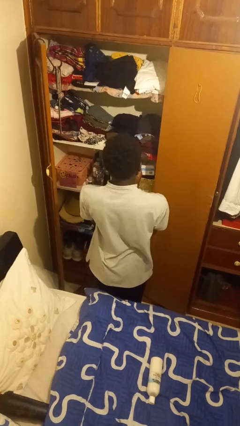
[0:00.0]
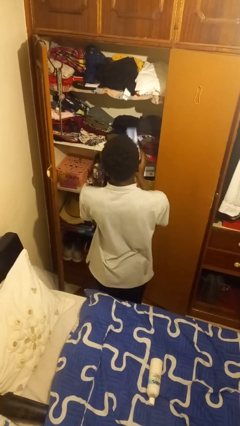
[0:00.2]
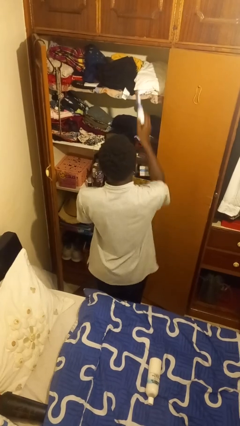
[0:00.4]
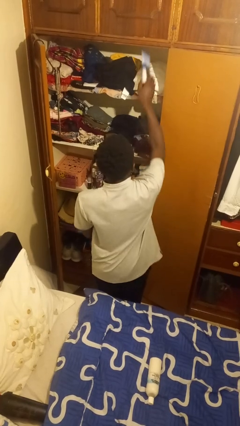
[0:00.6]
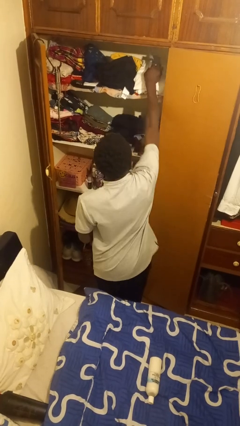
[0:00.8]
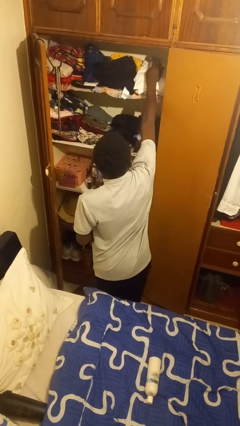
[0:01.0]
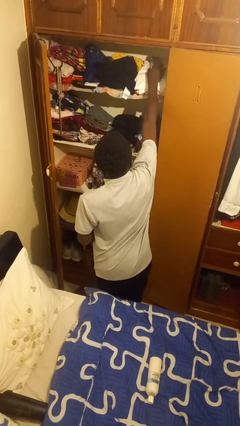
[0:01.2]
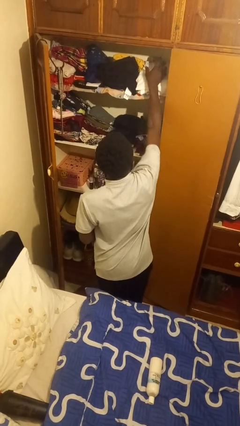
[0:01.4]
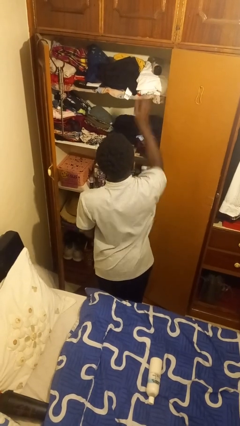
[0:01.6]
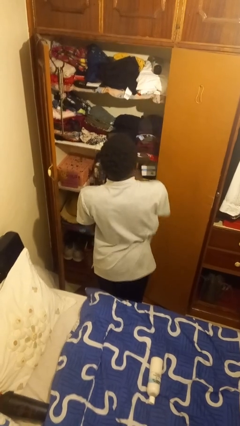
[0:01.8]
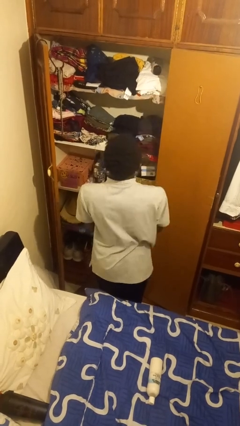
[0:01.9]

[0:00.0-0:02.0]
person puts down object on shelf

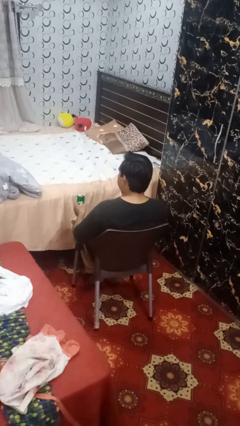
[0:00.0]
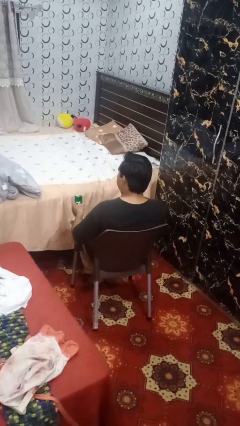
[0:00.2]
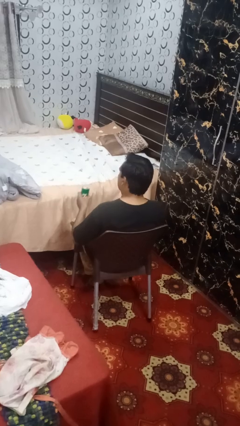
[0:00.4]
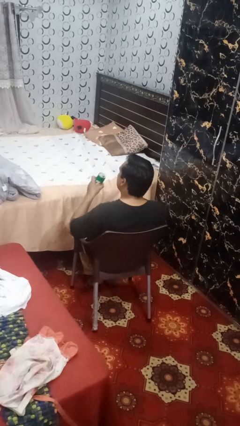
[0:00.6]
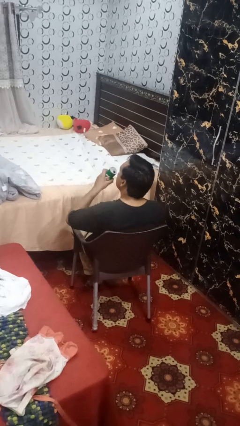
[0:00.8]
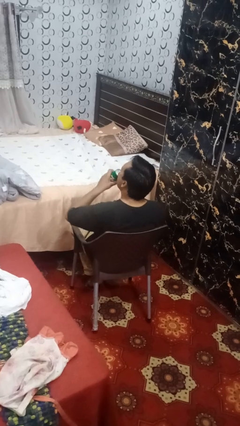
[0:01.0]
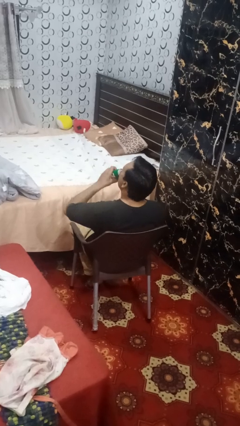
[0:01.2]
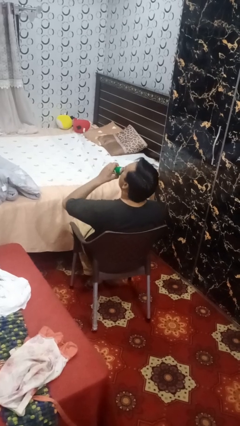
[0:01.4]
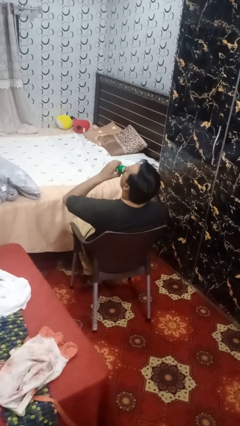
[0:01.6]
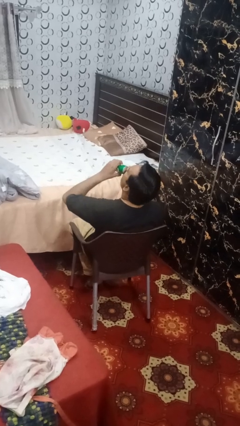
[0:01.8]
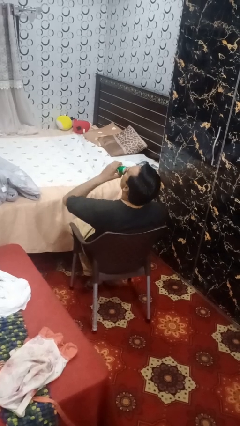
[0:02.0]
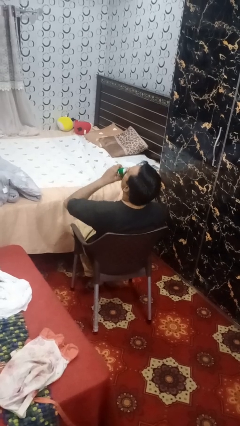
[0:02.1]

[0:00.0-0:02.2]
person drinks from beverage can

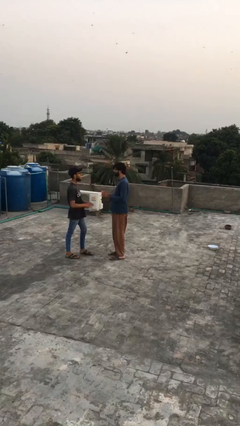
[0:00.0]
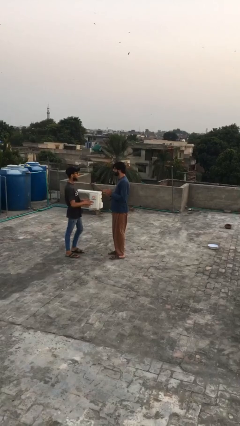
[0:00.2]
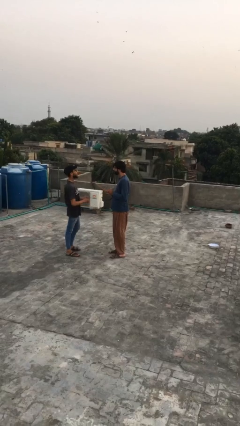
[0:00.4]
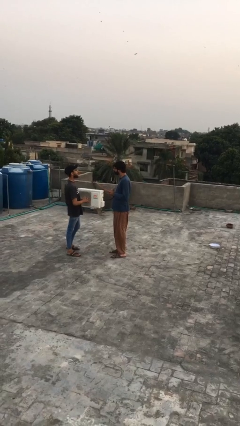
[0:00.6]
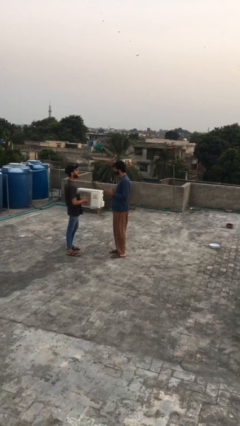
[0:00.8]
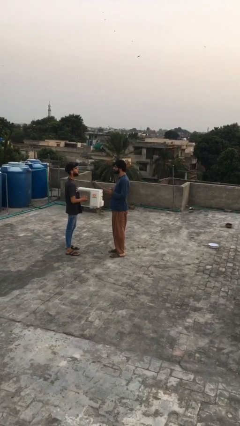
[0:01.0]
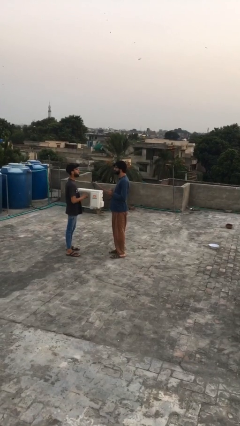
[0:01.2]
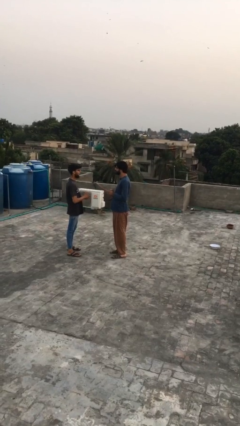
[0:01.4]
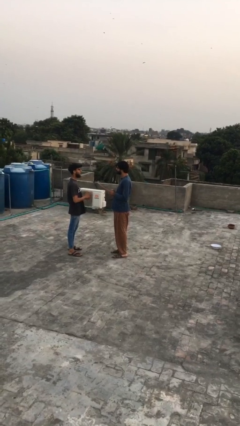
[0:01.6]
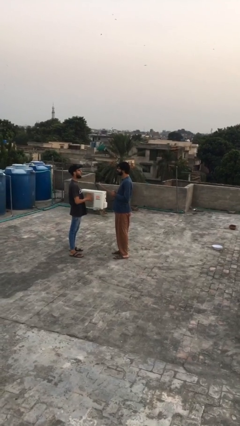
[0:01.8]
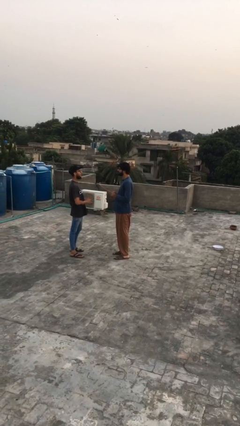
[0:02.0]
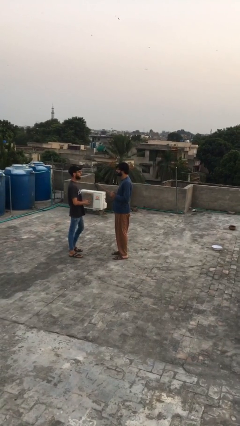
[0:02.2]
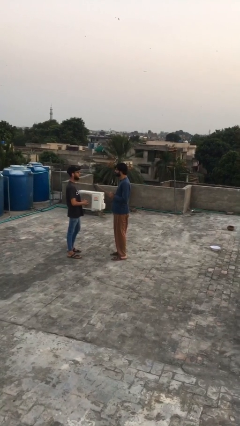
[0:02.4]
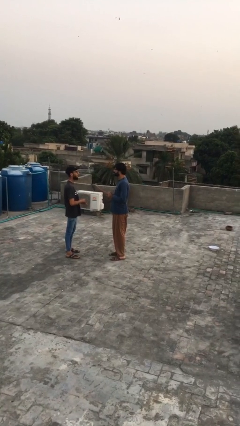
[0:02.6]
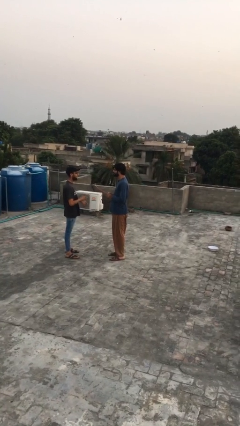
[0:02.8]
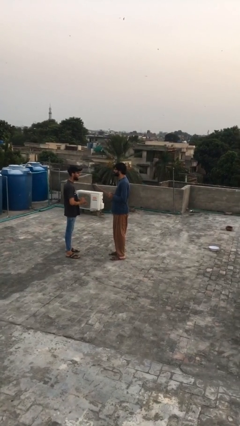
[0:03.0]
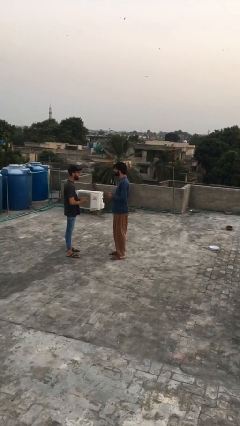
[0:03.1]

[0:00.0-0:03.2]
person talks to person

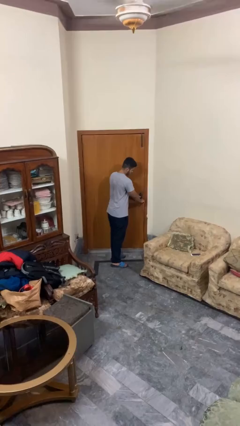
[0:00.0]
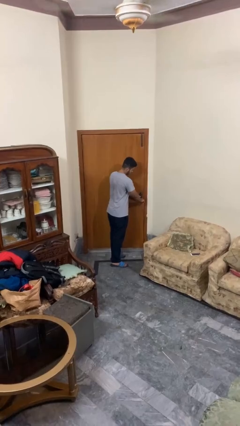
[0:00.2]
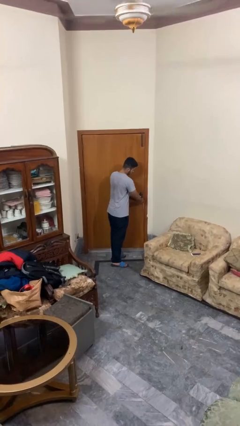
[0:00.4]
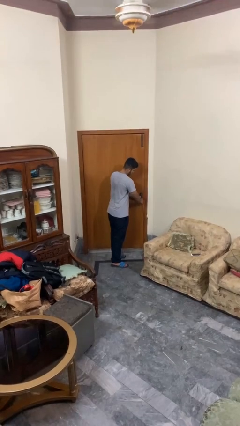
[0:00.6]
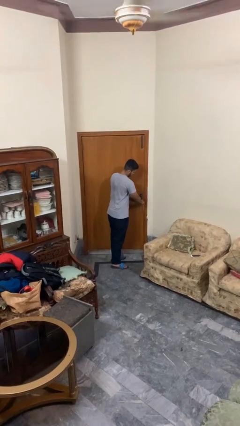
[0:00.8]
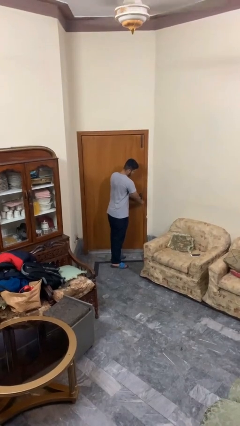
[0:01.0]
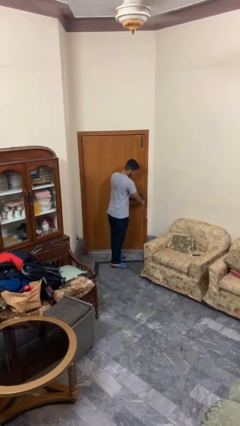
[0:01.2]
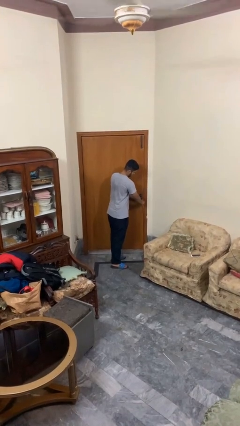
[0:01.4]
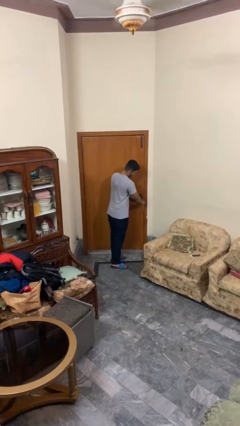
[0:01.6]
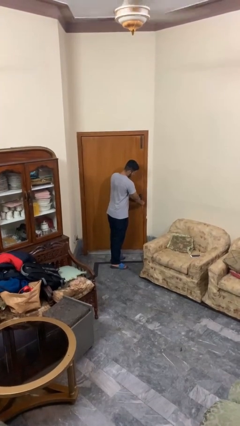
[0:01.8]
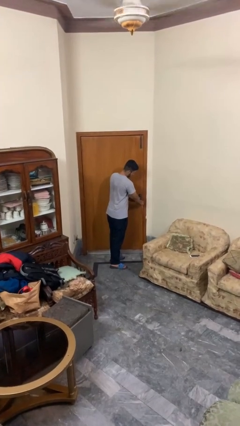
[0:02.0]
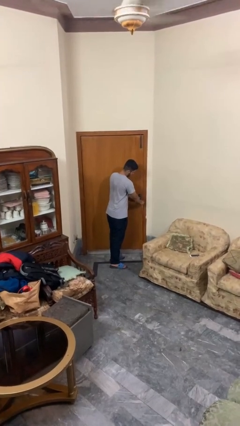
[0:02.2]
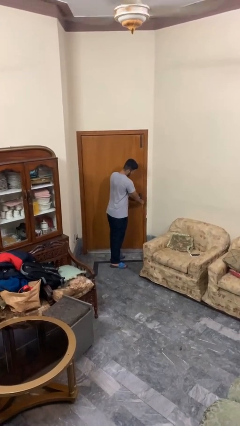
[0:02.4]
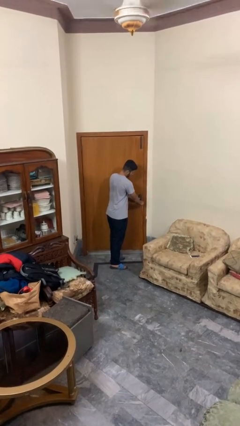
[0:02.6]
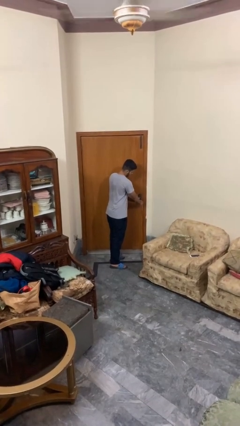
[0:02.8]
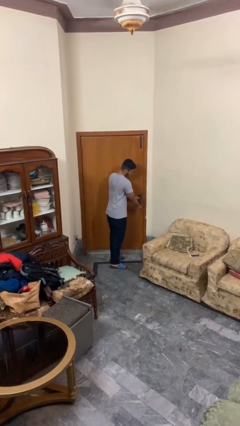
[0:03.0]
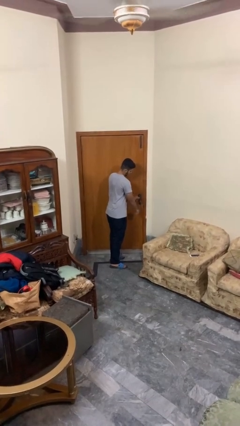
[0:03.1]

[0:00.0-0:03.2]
person locks door with keys

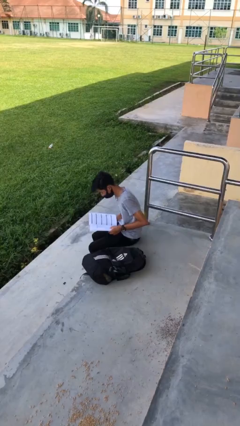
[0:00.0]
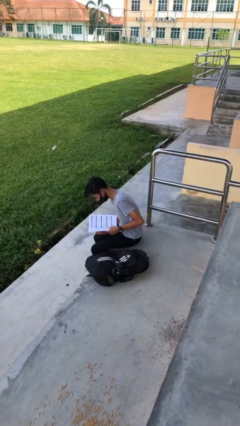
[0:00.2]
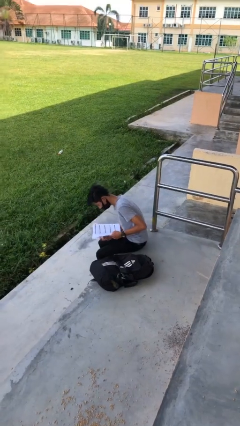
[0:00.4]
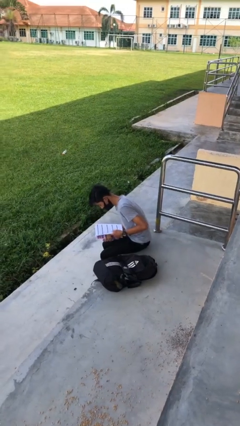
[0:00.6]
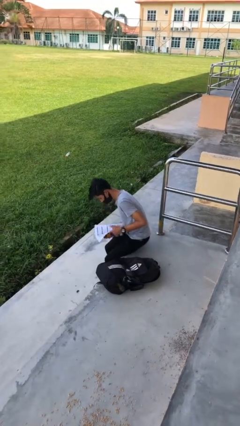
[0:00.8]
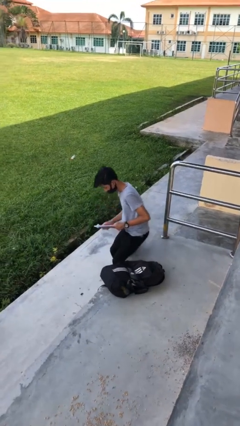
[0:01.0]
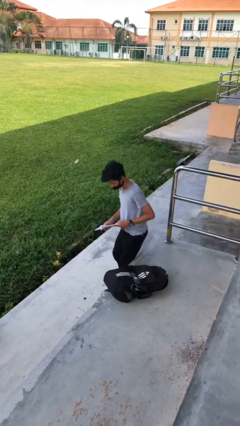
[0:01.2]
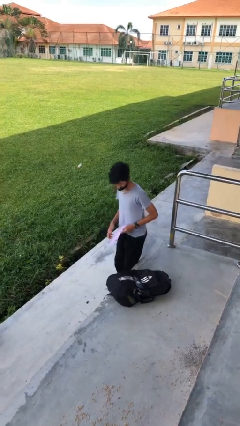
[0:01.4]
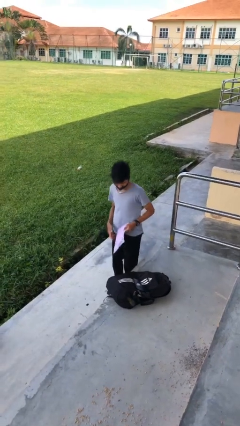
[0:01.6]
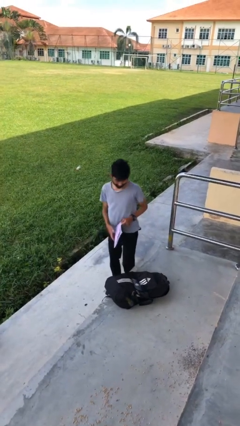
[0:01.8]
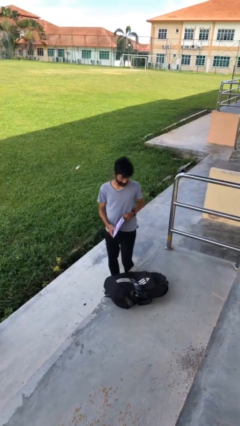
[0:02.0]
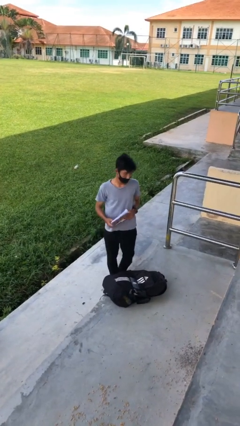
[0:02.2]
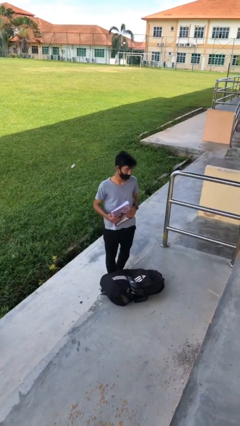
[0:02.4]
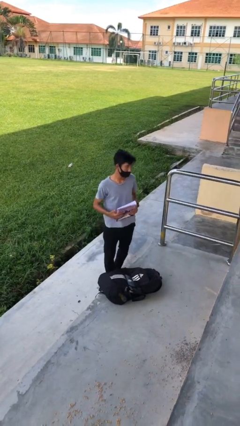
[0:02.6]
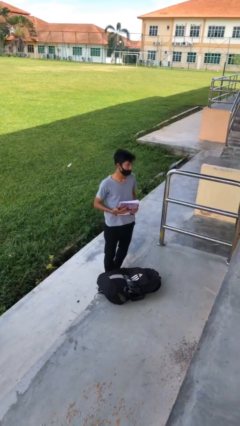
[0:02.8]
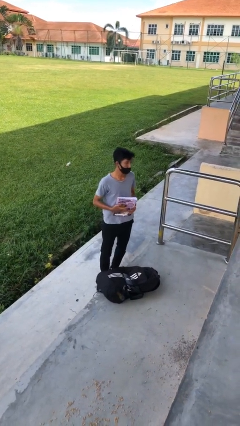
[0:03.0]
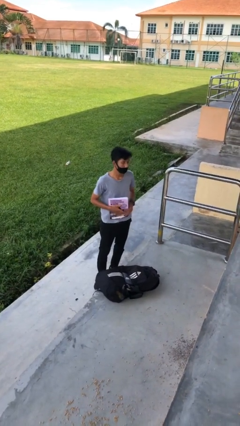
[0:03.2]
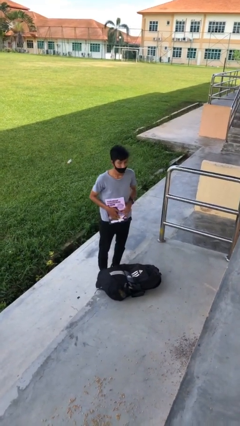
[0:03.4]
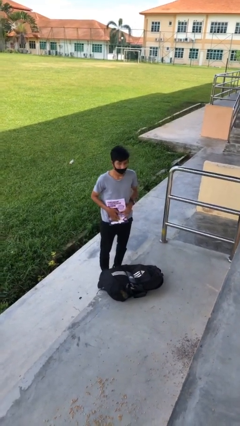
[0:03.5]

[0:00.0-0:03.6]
person stands up

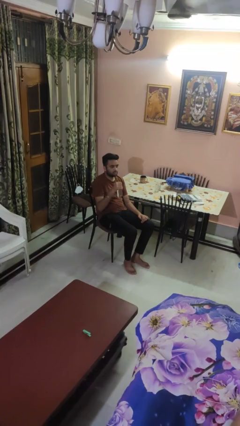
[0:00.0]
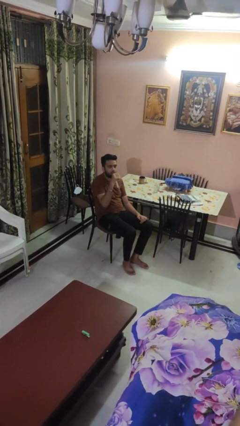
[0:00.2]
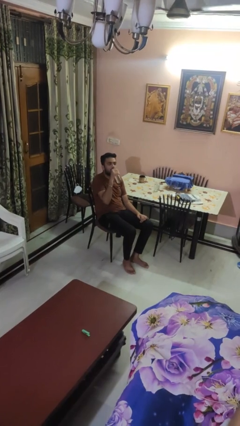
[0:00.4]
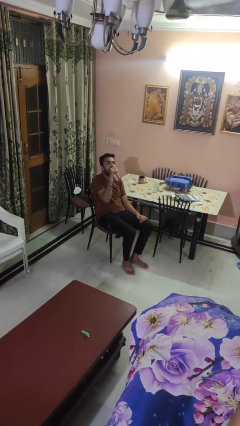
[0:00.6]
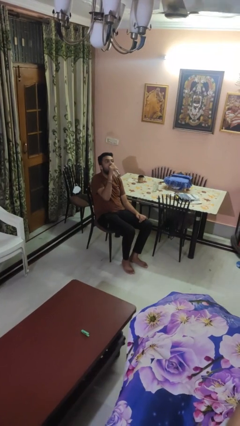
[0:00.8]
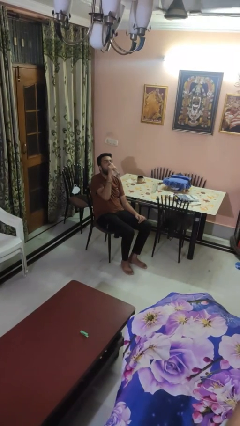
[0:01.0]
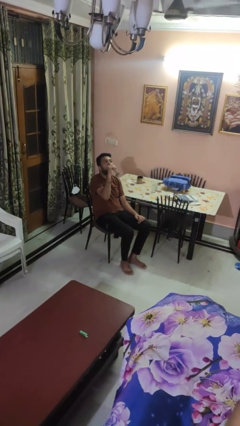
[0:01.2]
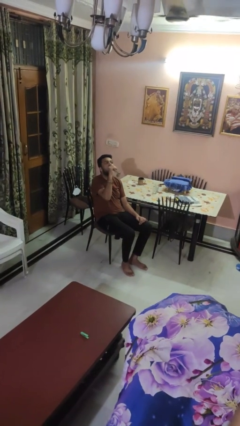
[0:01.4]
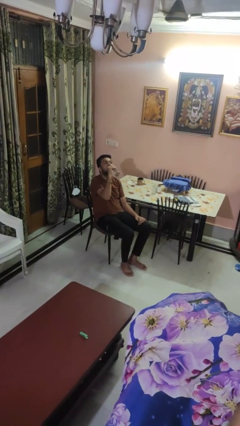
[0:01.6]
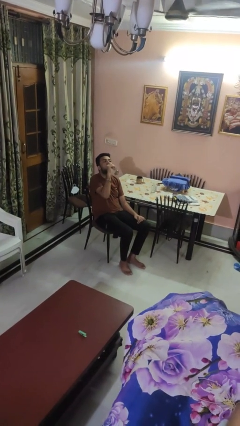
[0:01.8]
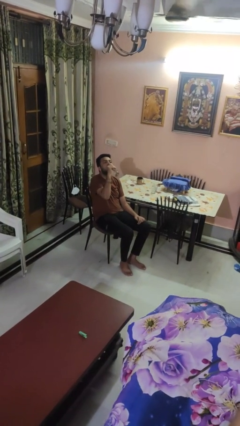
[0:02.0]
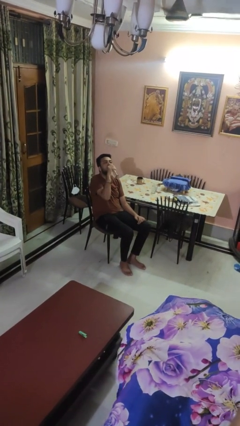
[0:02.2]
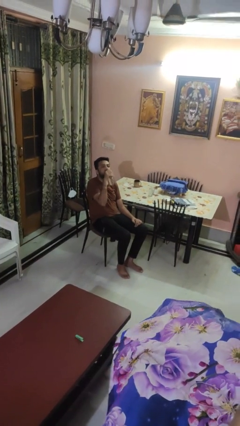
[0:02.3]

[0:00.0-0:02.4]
person drinks from bottle

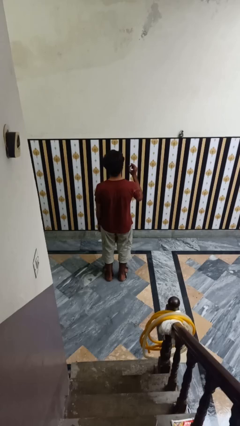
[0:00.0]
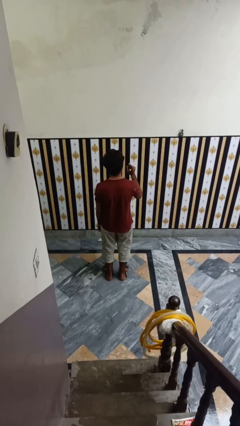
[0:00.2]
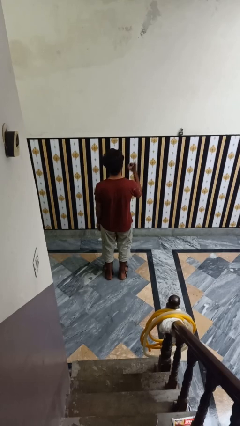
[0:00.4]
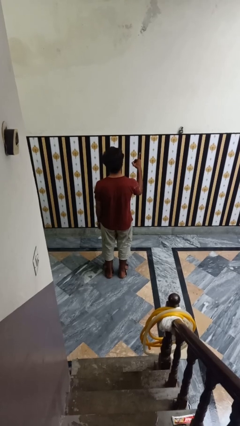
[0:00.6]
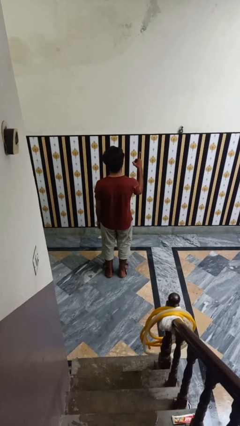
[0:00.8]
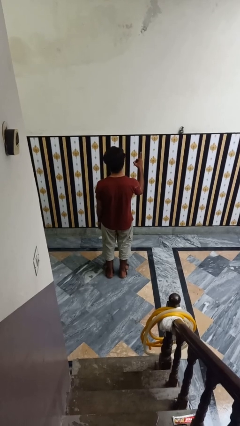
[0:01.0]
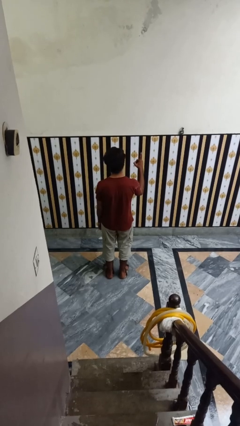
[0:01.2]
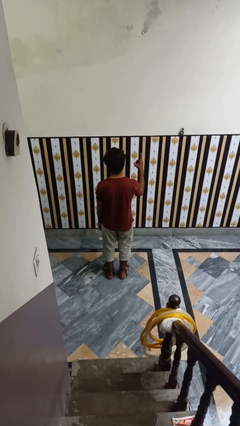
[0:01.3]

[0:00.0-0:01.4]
person gestures number one
